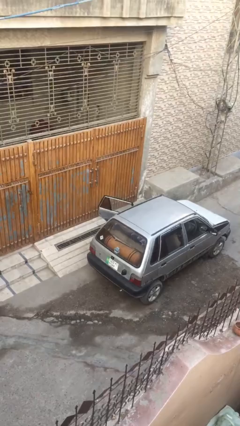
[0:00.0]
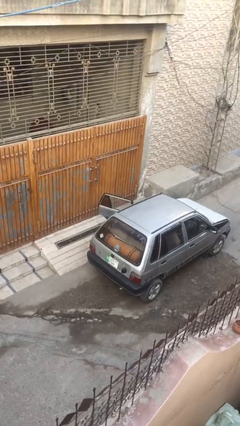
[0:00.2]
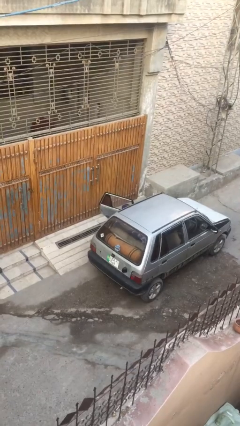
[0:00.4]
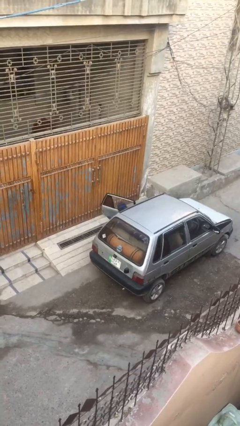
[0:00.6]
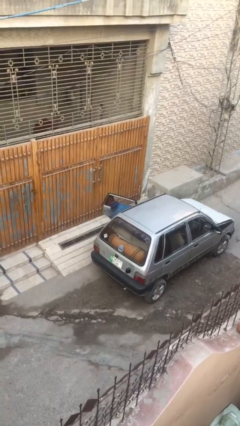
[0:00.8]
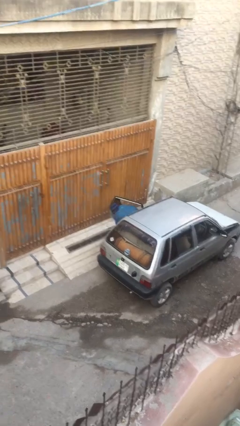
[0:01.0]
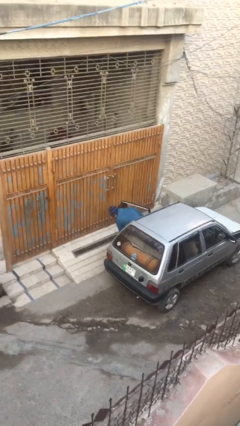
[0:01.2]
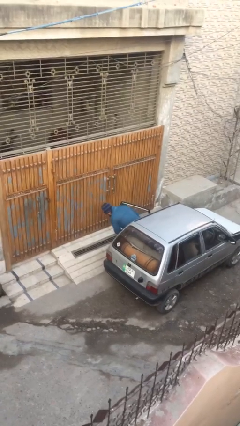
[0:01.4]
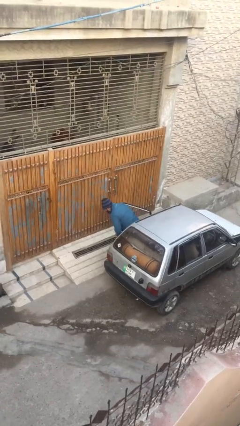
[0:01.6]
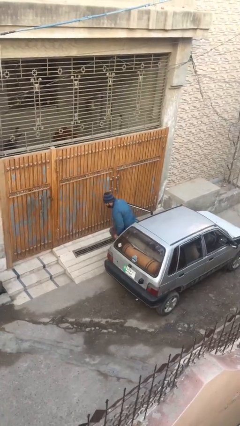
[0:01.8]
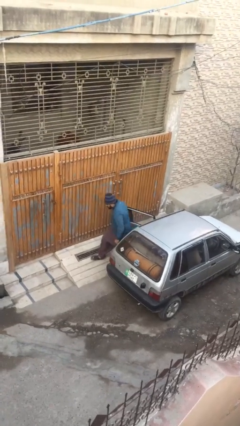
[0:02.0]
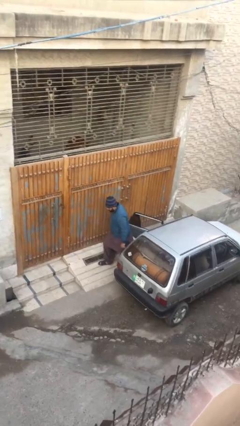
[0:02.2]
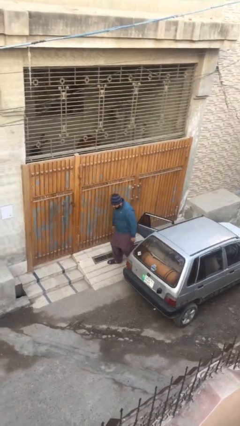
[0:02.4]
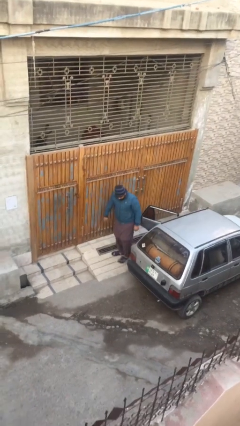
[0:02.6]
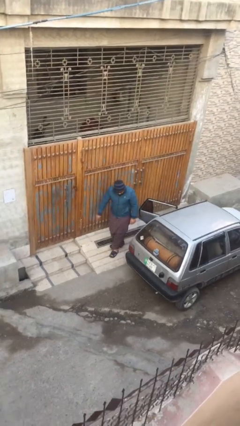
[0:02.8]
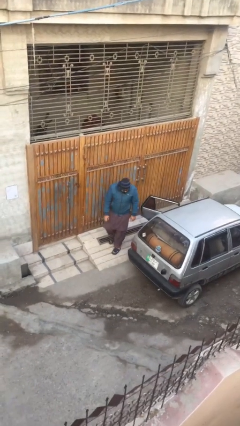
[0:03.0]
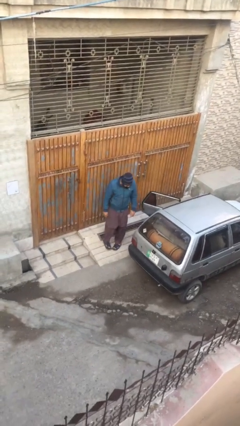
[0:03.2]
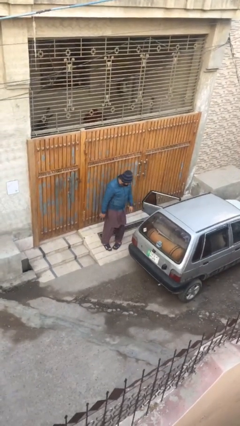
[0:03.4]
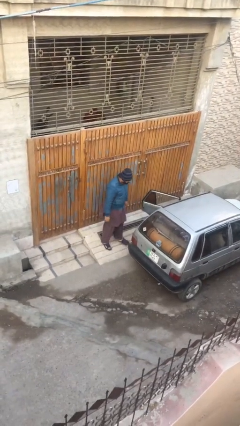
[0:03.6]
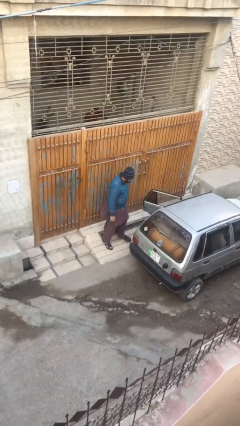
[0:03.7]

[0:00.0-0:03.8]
person exits car

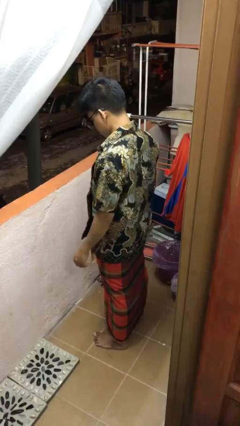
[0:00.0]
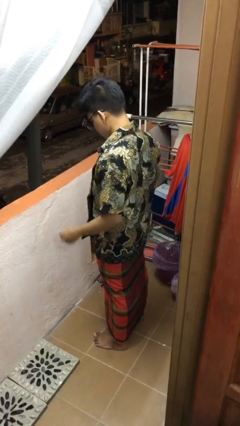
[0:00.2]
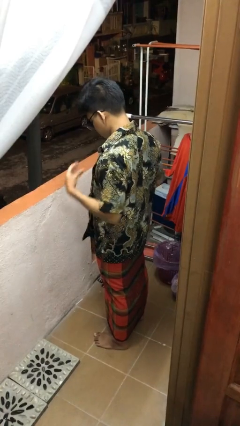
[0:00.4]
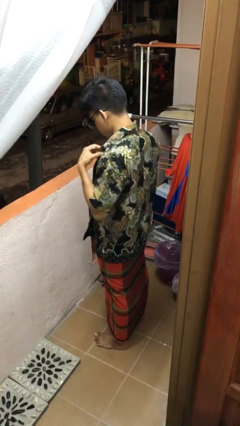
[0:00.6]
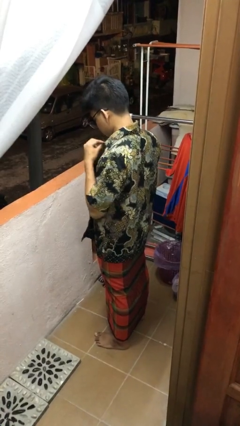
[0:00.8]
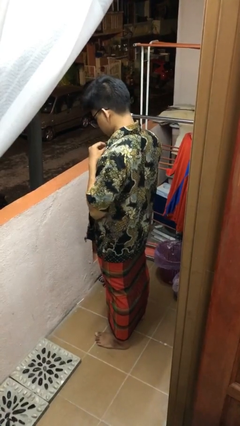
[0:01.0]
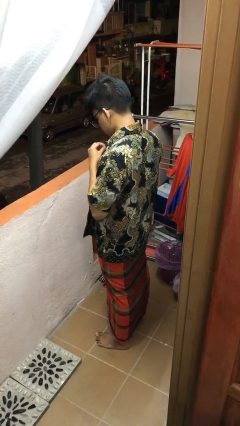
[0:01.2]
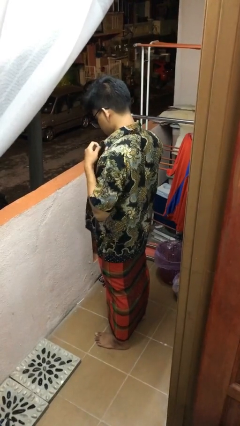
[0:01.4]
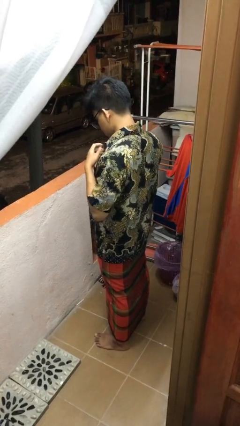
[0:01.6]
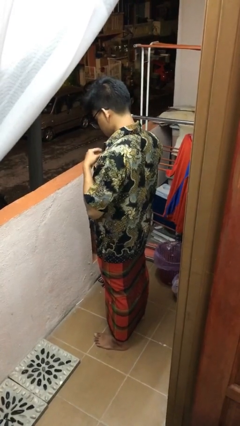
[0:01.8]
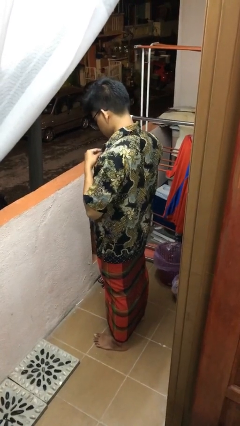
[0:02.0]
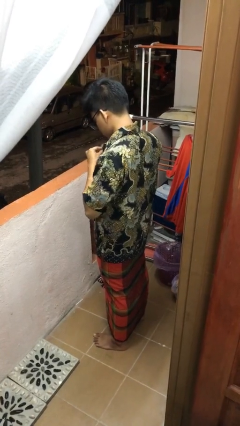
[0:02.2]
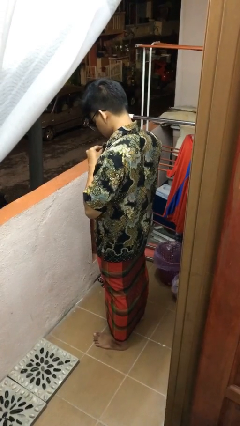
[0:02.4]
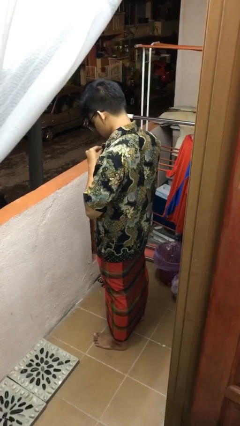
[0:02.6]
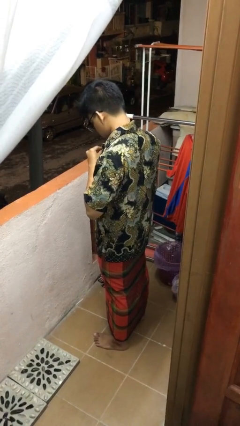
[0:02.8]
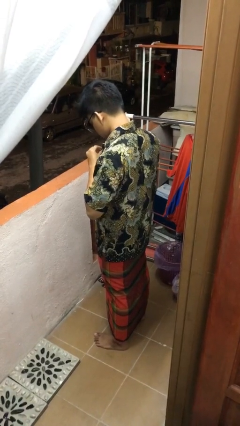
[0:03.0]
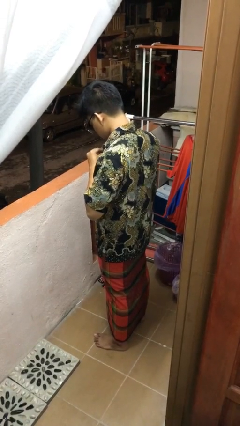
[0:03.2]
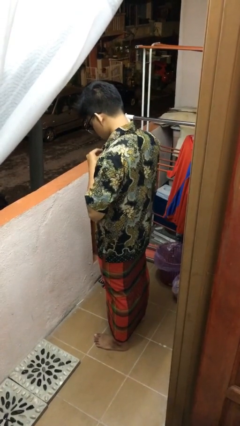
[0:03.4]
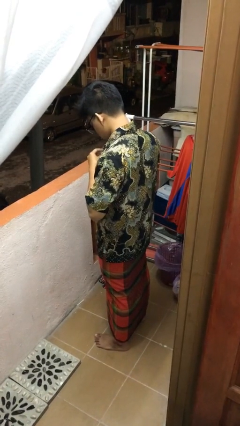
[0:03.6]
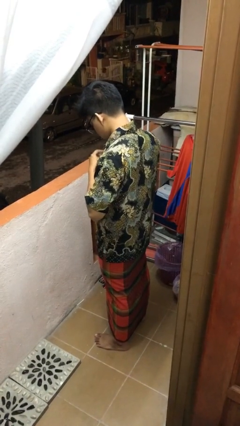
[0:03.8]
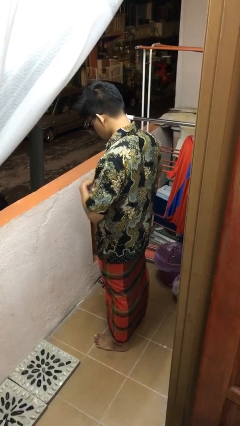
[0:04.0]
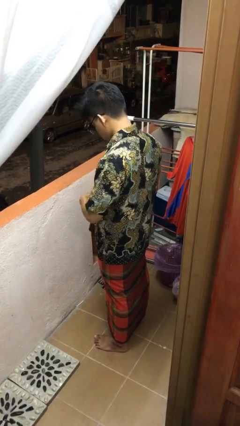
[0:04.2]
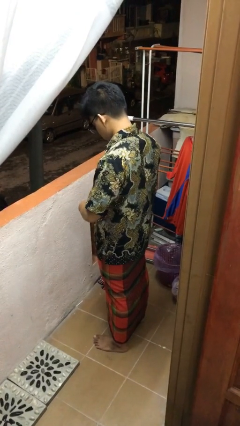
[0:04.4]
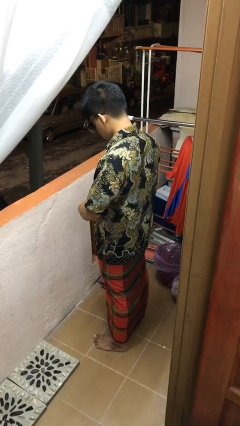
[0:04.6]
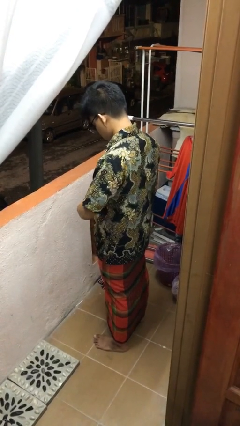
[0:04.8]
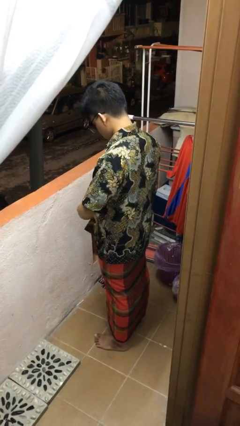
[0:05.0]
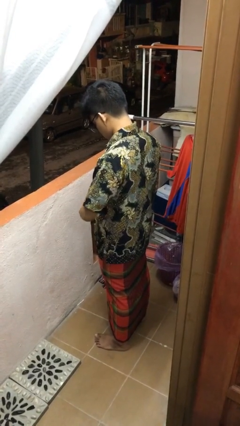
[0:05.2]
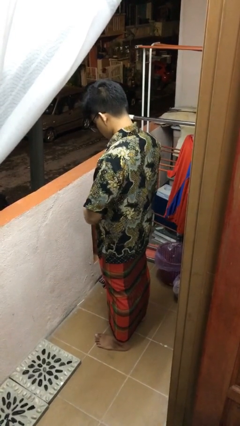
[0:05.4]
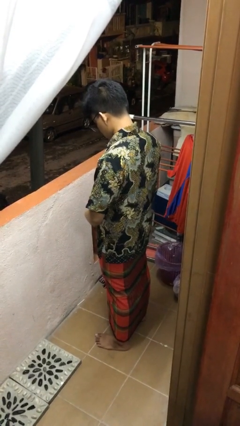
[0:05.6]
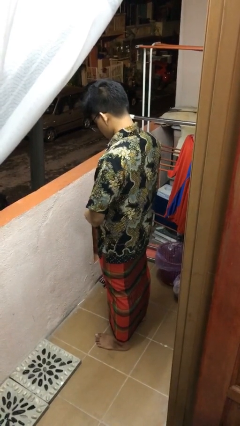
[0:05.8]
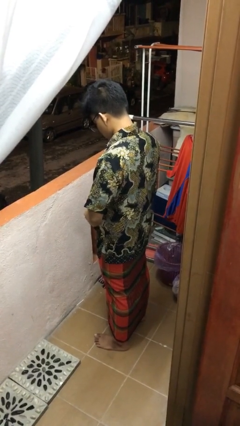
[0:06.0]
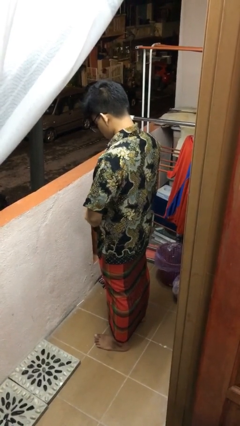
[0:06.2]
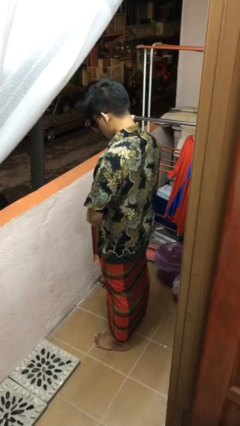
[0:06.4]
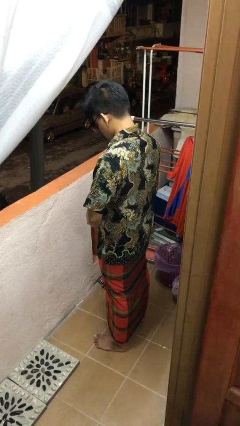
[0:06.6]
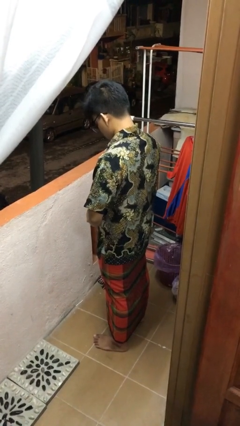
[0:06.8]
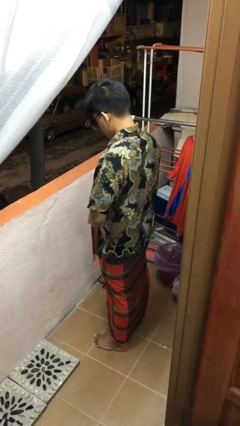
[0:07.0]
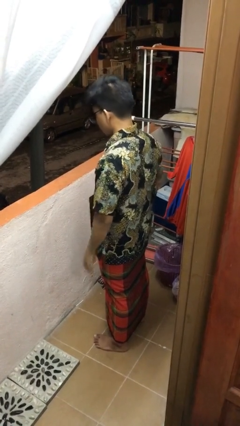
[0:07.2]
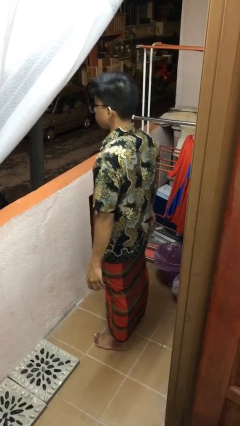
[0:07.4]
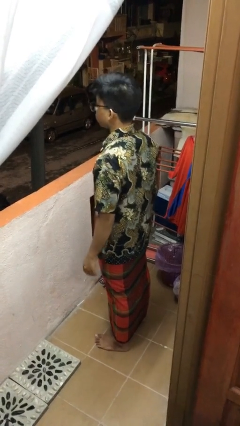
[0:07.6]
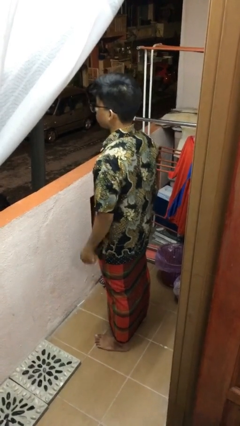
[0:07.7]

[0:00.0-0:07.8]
person buttons shirt

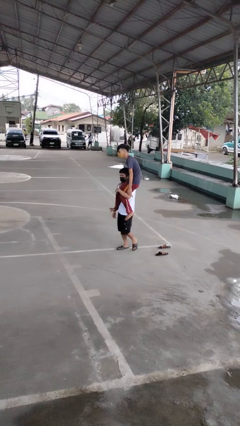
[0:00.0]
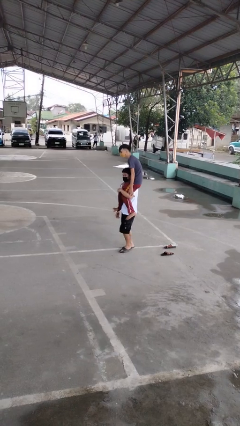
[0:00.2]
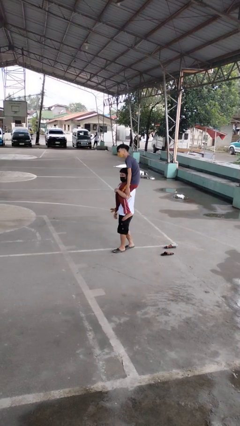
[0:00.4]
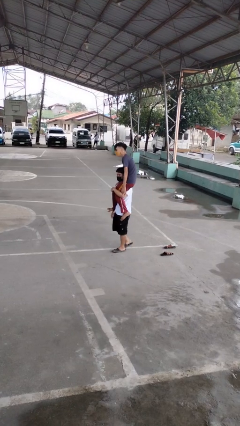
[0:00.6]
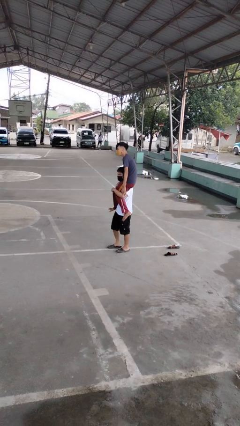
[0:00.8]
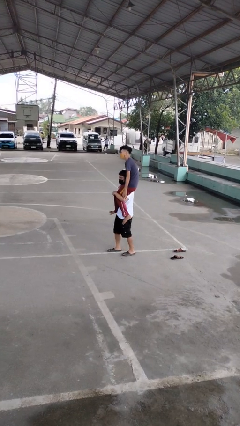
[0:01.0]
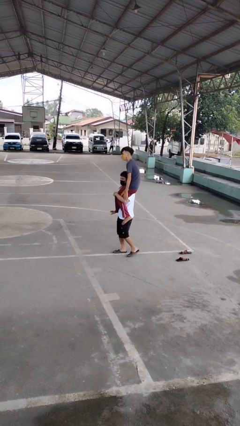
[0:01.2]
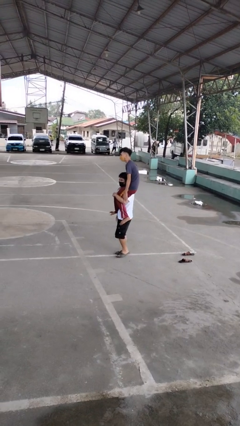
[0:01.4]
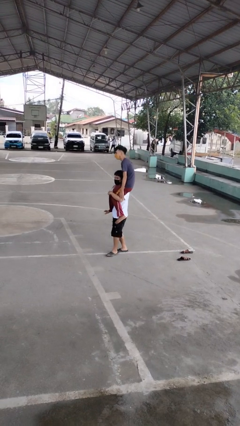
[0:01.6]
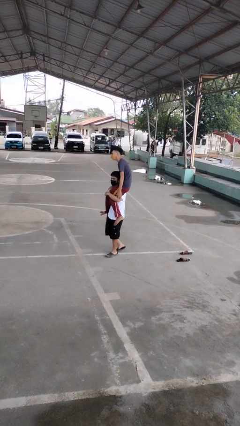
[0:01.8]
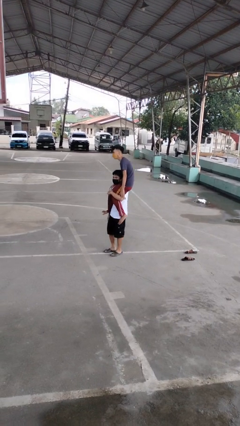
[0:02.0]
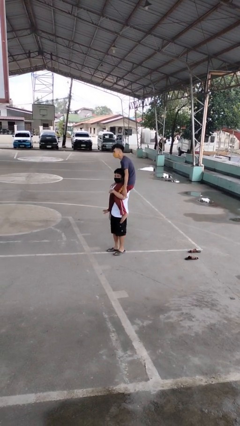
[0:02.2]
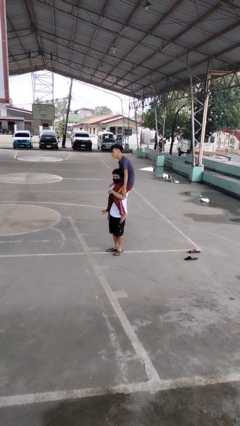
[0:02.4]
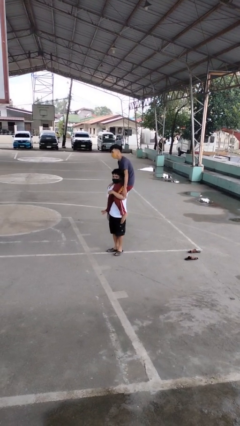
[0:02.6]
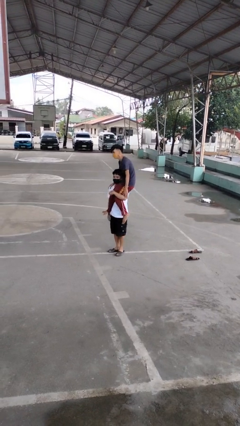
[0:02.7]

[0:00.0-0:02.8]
person carries person on shoulders

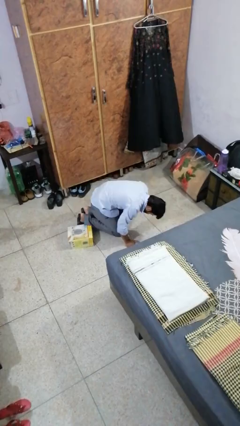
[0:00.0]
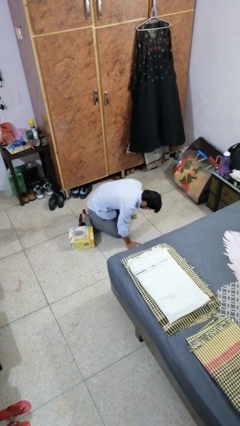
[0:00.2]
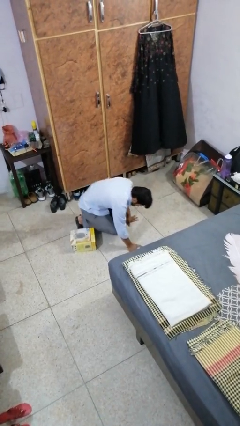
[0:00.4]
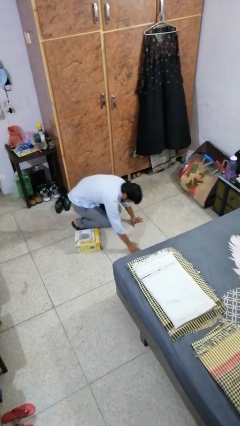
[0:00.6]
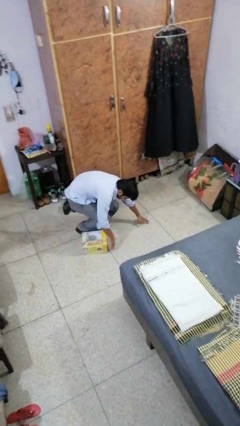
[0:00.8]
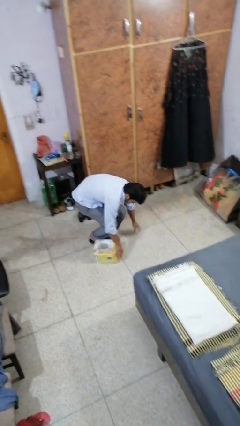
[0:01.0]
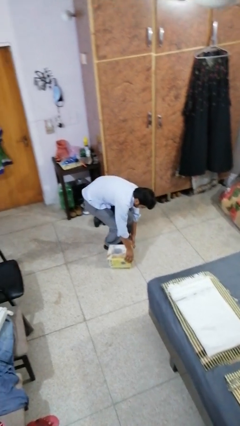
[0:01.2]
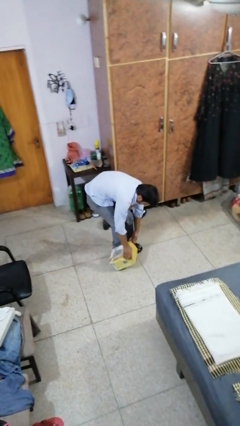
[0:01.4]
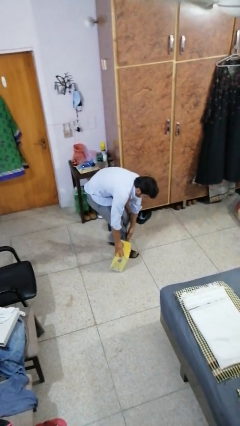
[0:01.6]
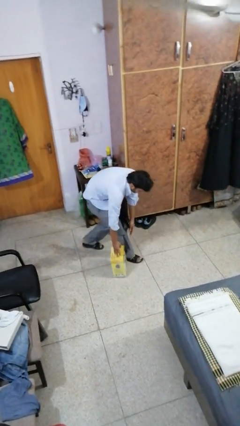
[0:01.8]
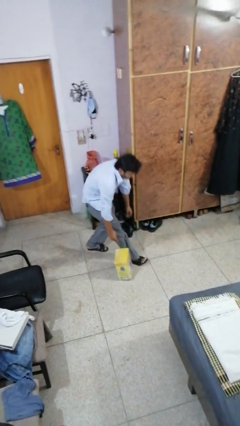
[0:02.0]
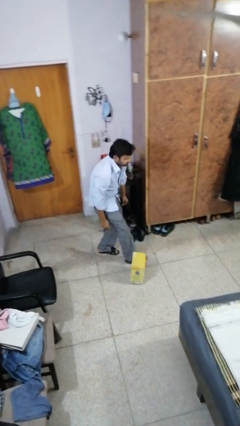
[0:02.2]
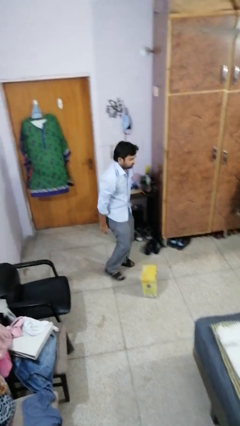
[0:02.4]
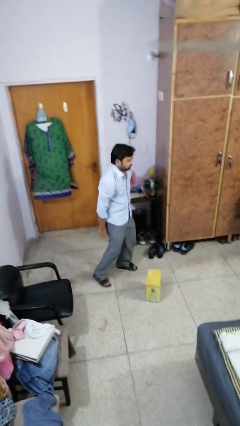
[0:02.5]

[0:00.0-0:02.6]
person stands up from floor

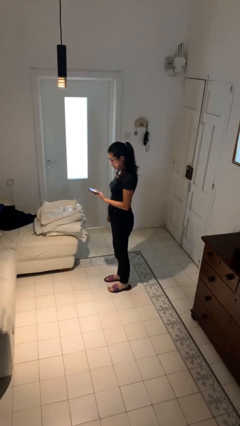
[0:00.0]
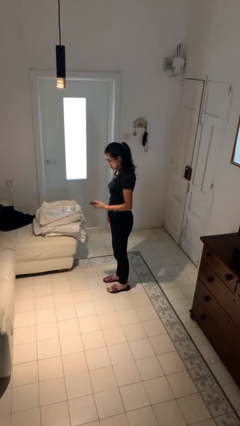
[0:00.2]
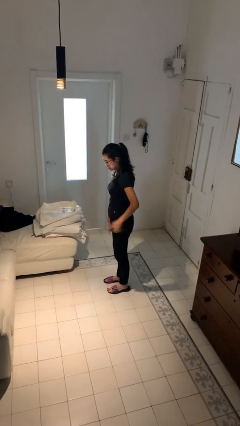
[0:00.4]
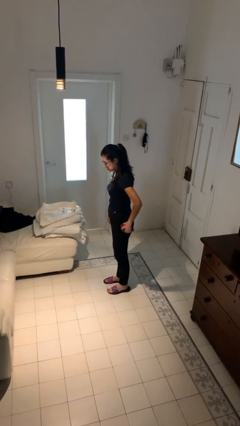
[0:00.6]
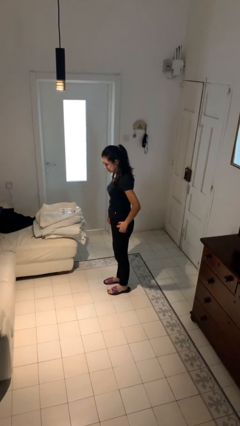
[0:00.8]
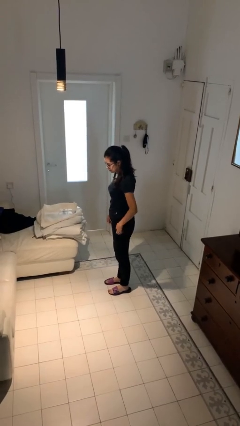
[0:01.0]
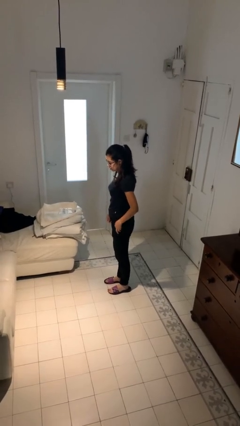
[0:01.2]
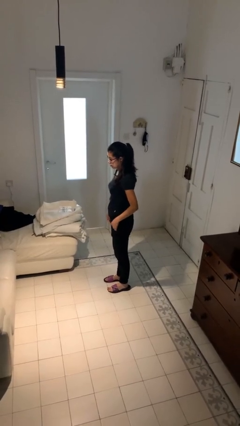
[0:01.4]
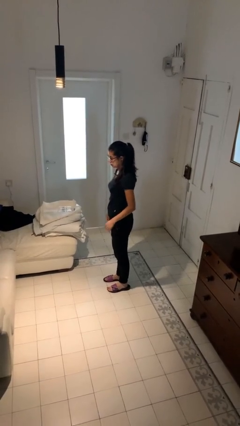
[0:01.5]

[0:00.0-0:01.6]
person puts phone into pocket
